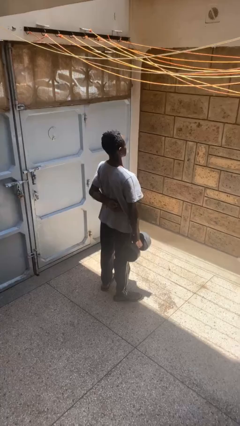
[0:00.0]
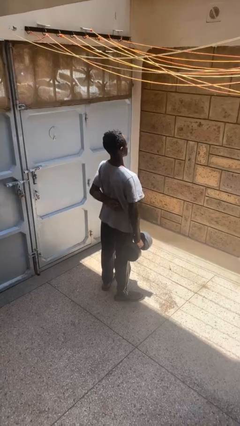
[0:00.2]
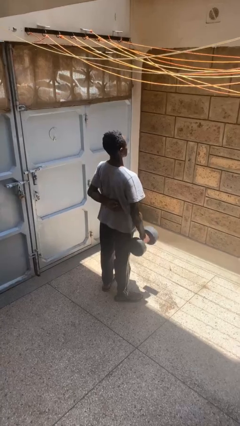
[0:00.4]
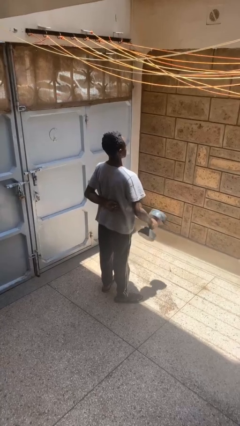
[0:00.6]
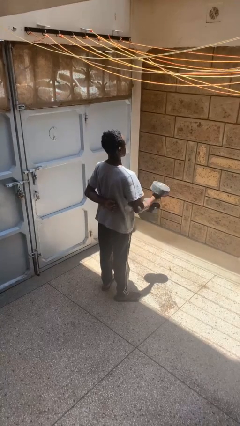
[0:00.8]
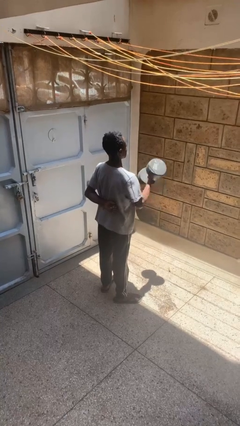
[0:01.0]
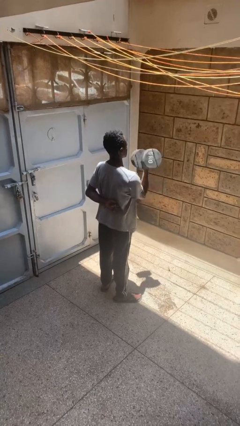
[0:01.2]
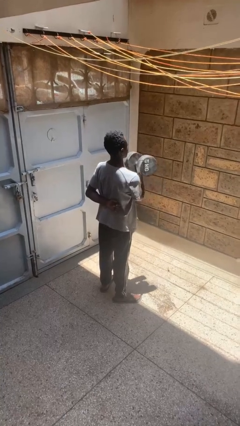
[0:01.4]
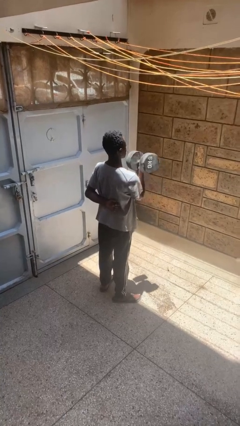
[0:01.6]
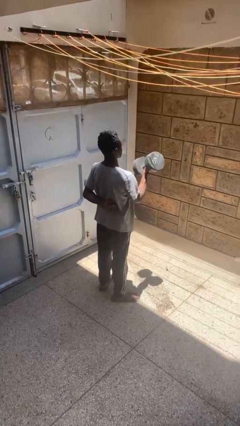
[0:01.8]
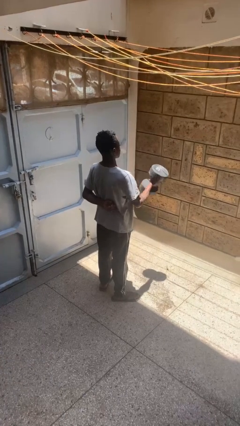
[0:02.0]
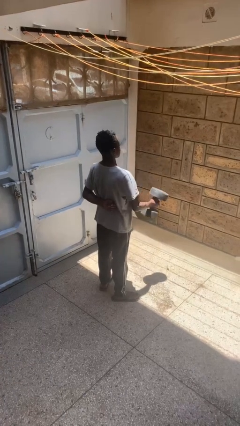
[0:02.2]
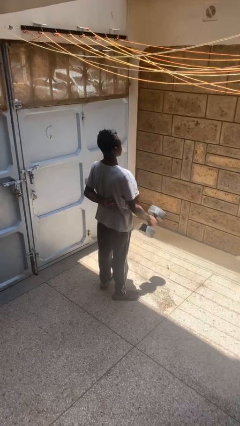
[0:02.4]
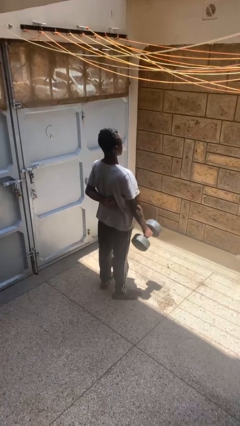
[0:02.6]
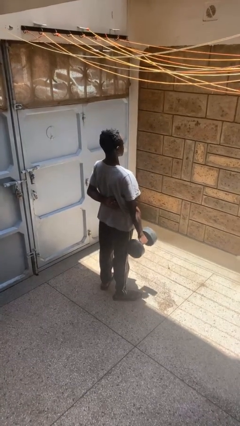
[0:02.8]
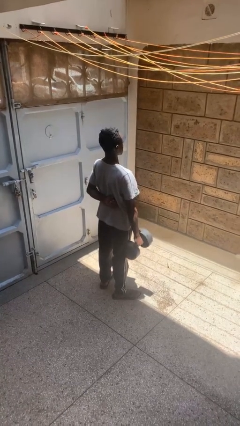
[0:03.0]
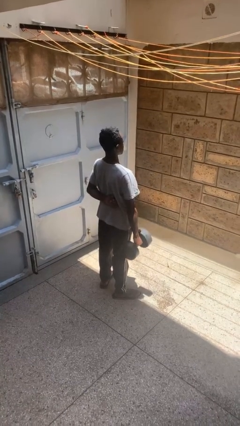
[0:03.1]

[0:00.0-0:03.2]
person lifts dumbbells

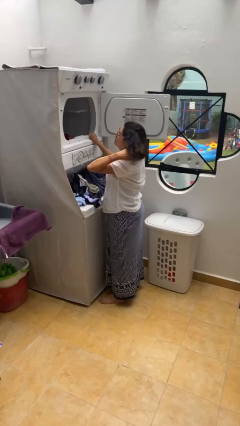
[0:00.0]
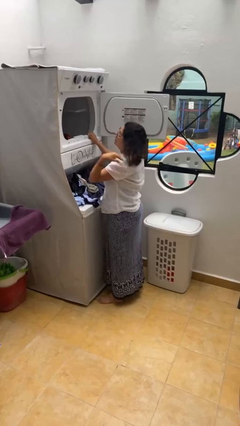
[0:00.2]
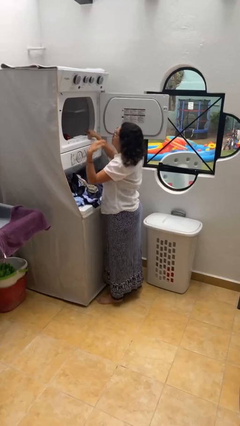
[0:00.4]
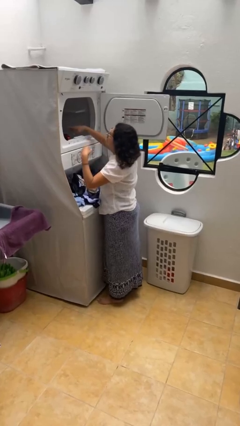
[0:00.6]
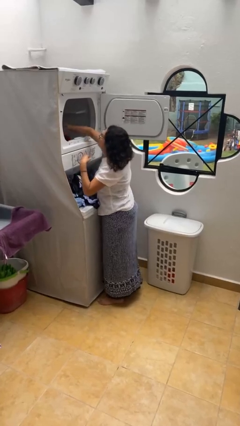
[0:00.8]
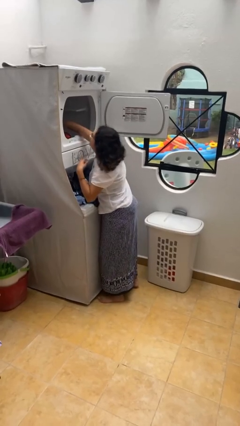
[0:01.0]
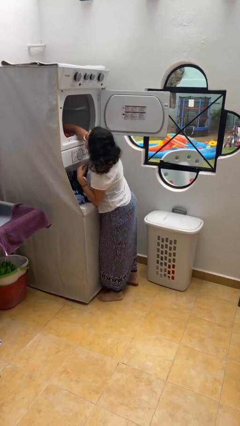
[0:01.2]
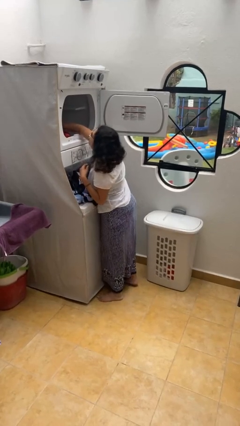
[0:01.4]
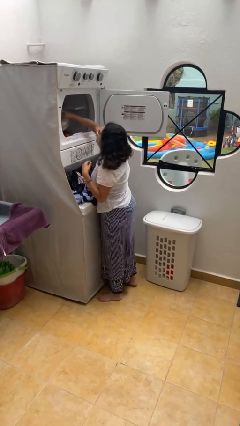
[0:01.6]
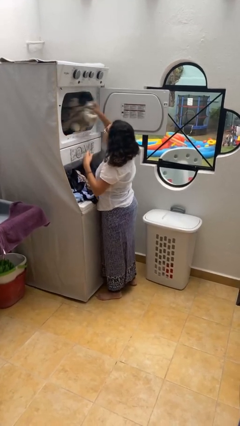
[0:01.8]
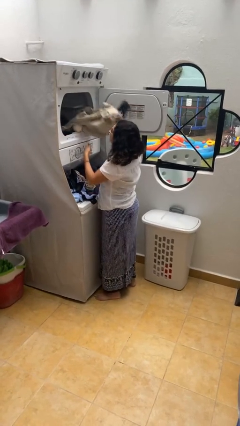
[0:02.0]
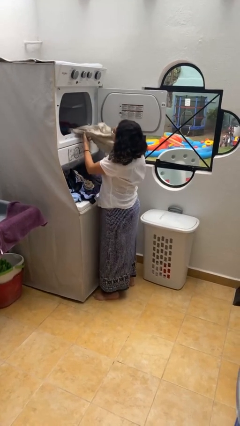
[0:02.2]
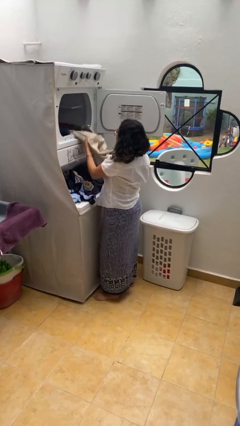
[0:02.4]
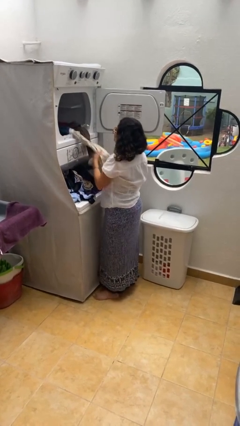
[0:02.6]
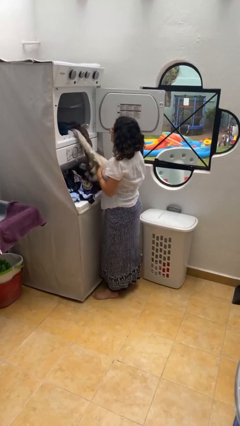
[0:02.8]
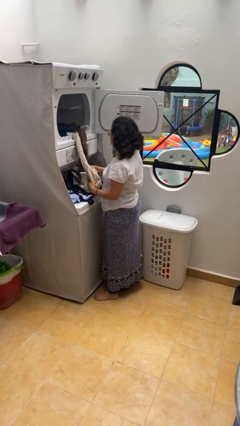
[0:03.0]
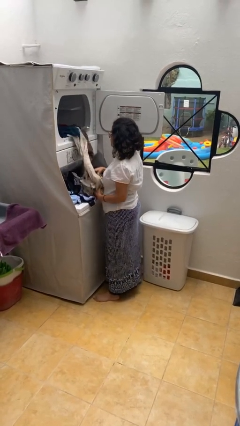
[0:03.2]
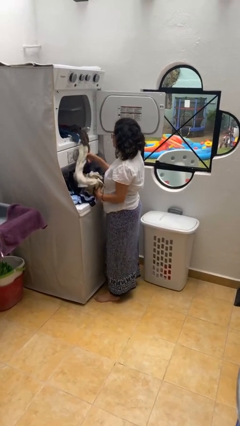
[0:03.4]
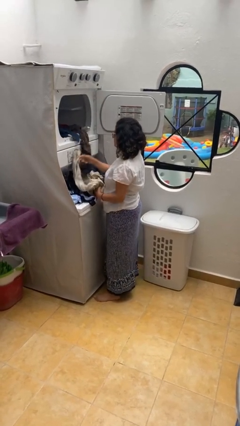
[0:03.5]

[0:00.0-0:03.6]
person unloads dryer

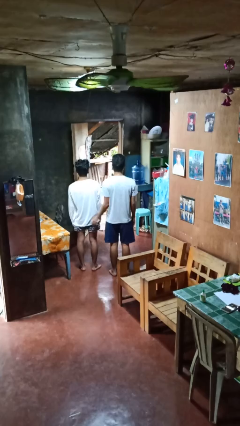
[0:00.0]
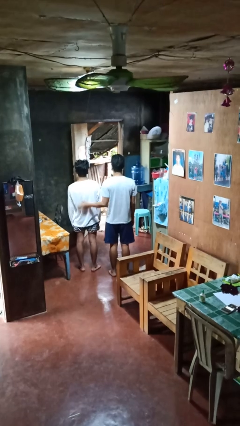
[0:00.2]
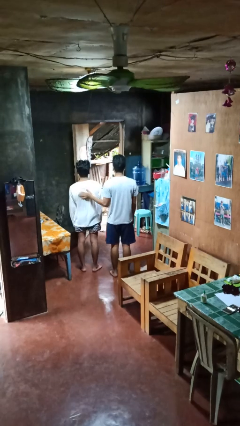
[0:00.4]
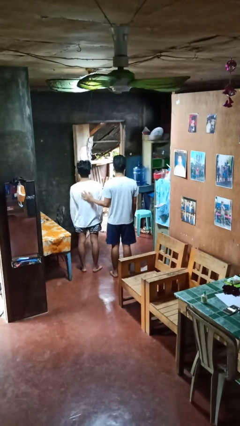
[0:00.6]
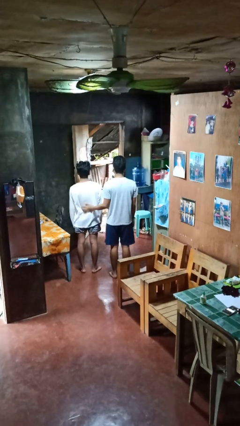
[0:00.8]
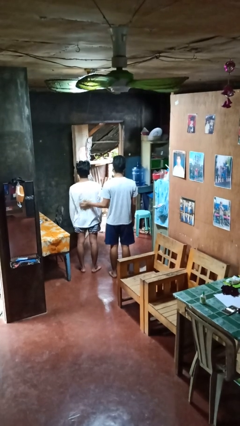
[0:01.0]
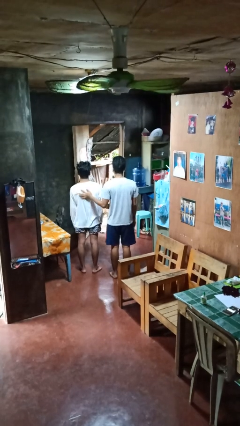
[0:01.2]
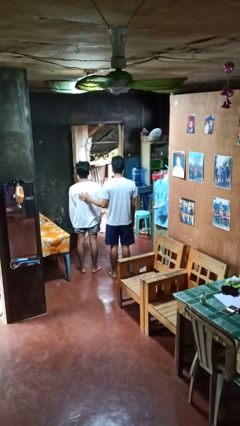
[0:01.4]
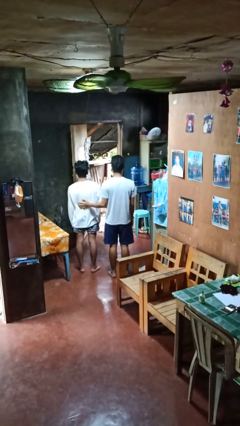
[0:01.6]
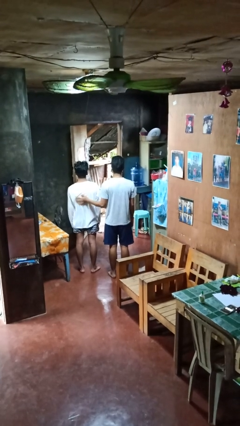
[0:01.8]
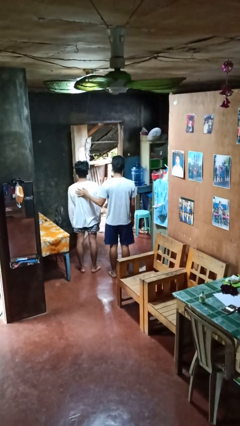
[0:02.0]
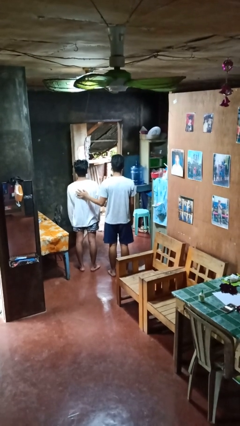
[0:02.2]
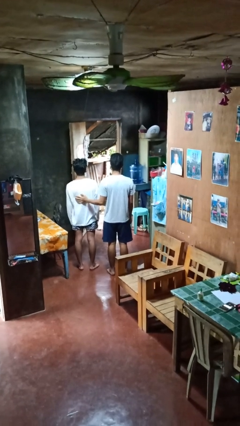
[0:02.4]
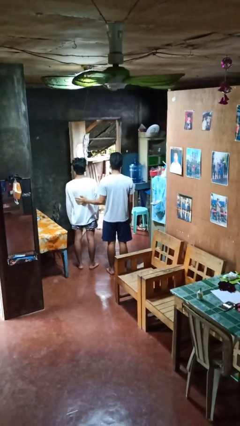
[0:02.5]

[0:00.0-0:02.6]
person touches back of person

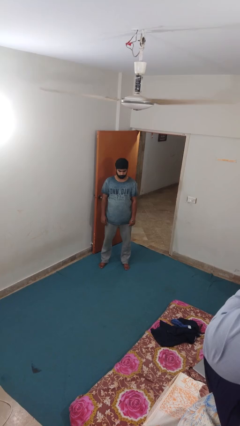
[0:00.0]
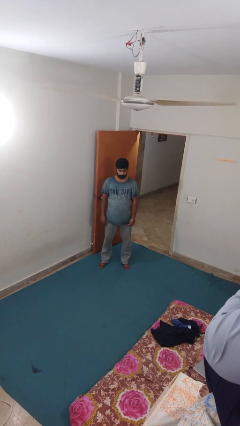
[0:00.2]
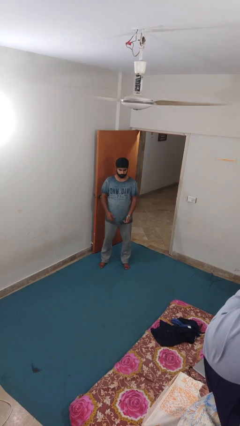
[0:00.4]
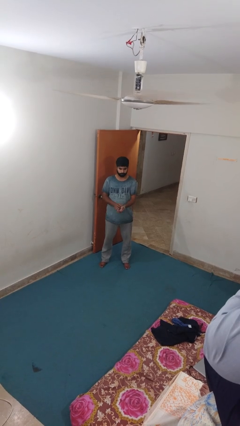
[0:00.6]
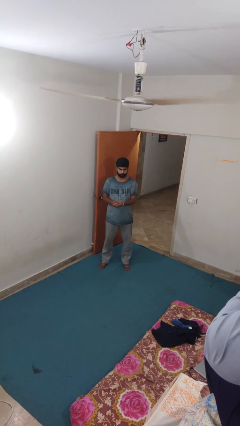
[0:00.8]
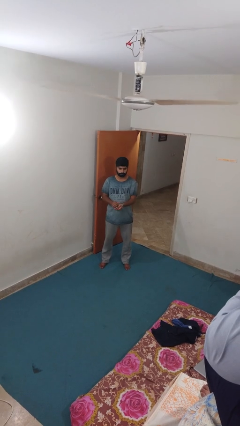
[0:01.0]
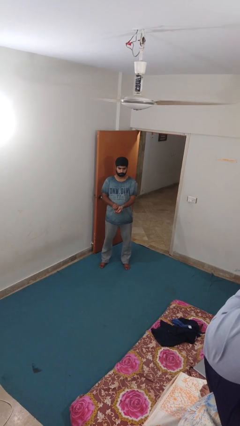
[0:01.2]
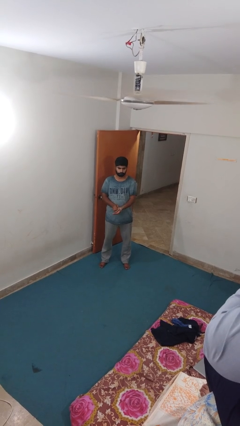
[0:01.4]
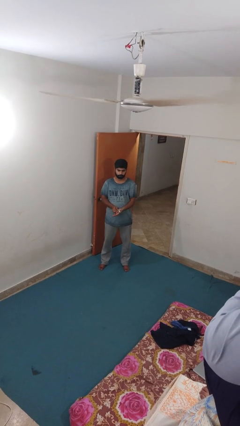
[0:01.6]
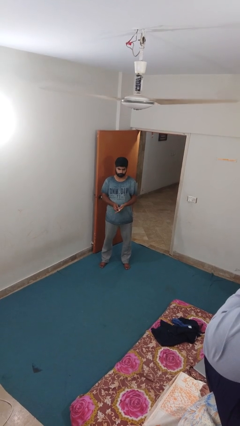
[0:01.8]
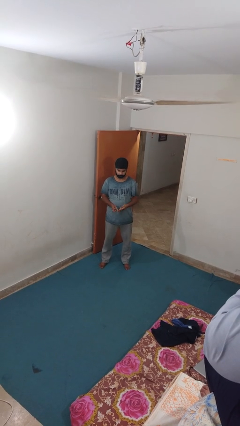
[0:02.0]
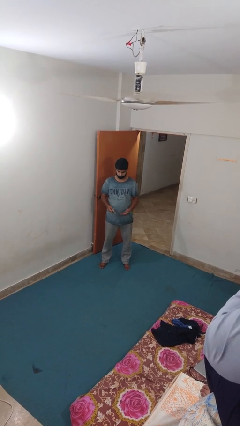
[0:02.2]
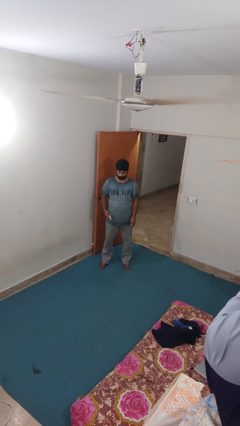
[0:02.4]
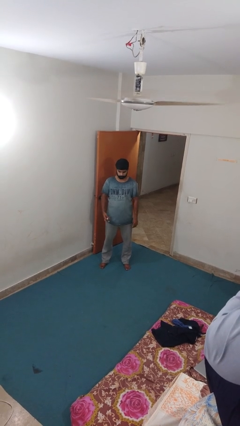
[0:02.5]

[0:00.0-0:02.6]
person takes off wristwatch

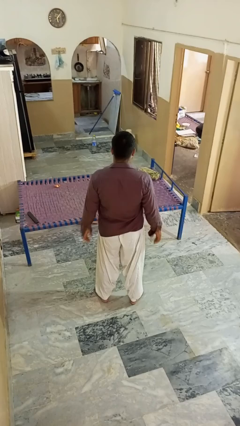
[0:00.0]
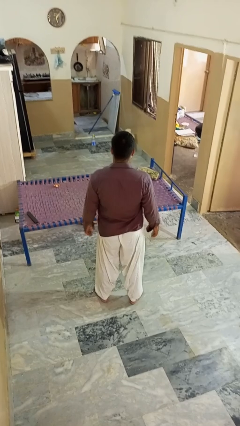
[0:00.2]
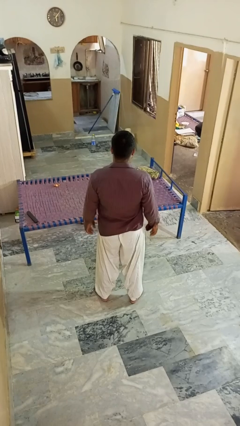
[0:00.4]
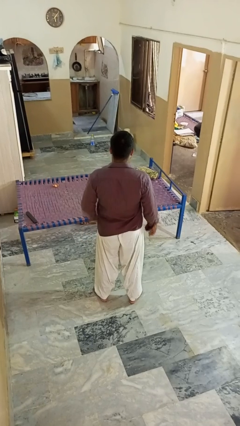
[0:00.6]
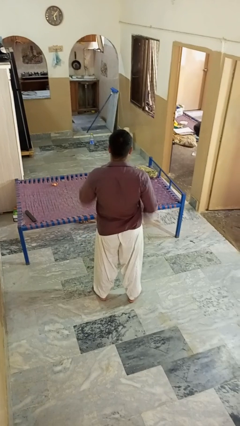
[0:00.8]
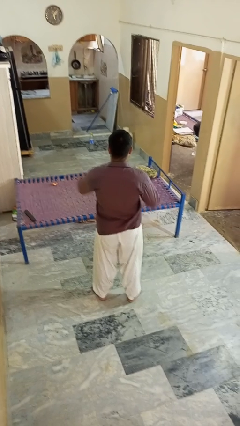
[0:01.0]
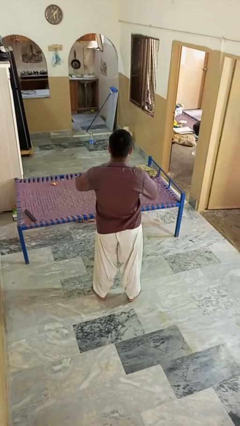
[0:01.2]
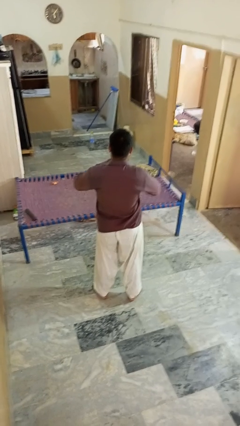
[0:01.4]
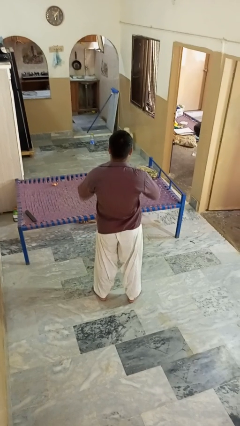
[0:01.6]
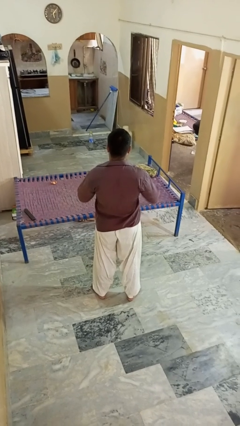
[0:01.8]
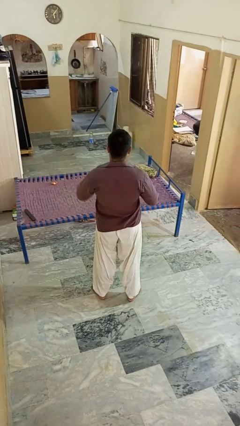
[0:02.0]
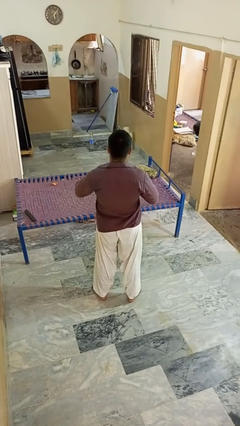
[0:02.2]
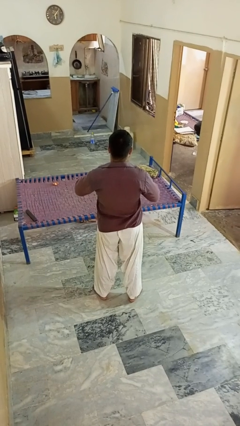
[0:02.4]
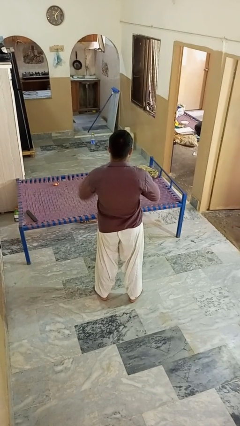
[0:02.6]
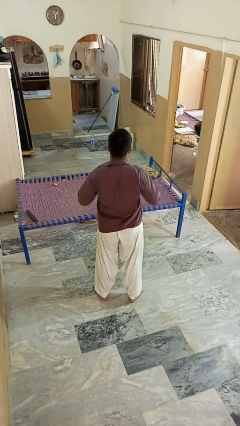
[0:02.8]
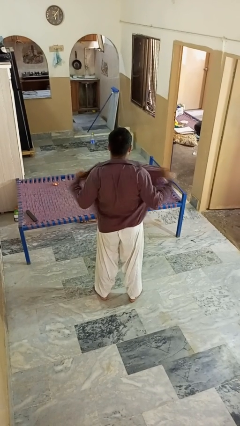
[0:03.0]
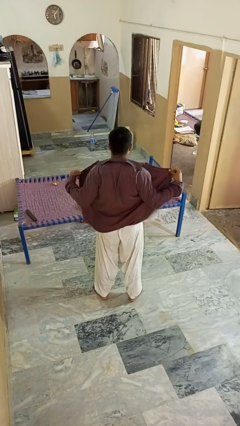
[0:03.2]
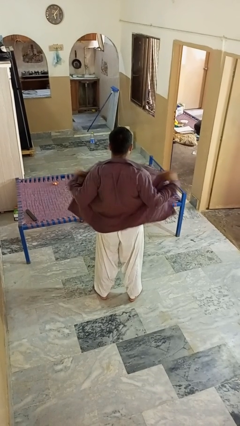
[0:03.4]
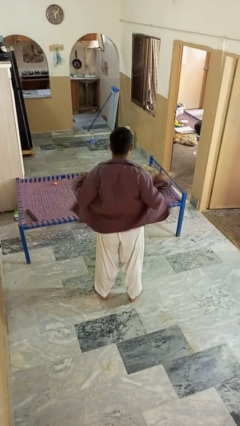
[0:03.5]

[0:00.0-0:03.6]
person unbuttons shirt

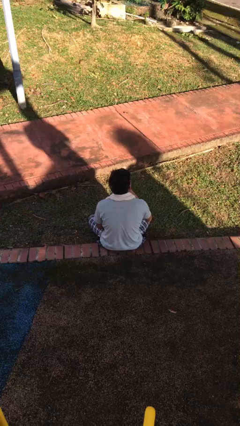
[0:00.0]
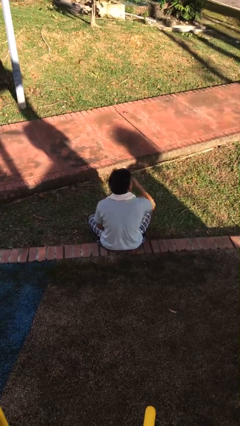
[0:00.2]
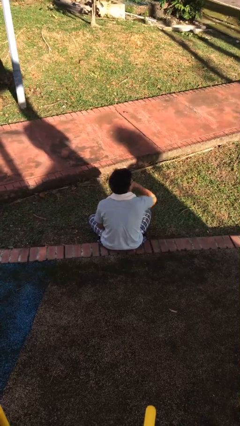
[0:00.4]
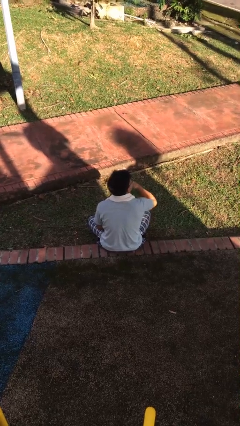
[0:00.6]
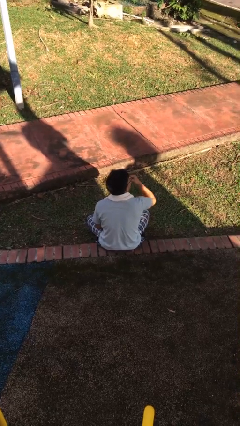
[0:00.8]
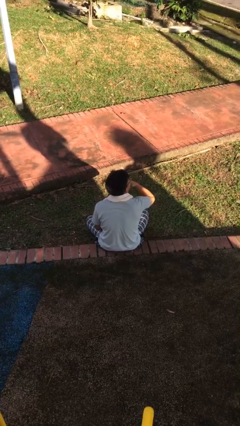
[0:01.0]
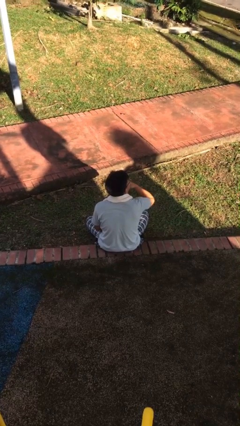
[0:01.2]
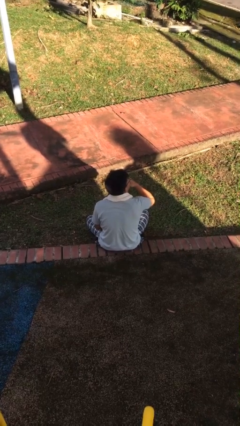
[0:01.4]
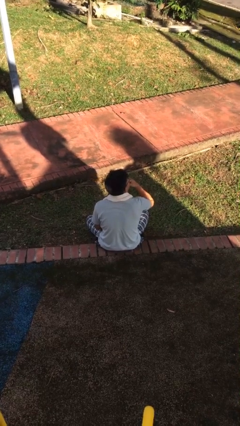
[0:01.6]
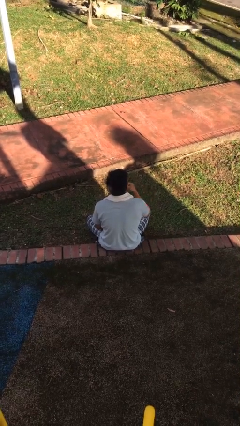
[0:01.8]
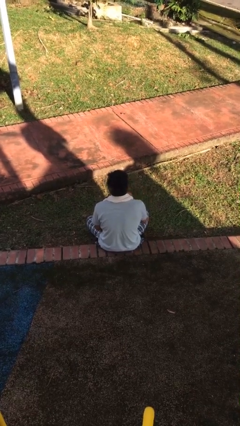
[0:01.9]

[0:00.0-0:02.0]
person strokes chin
